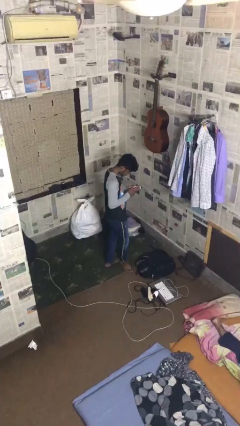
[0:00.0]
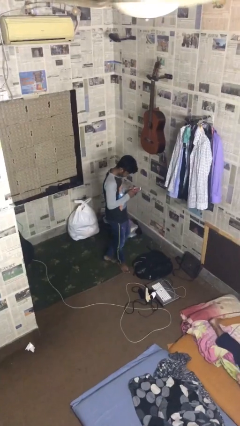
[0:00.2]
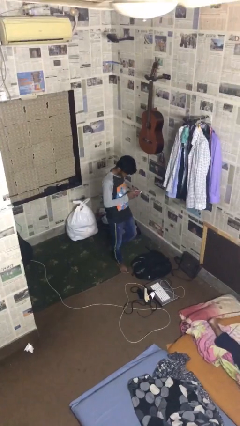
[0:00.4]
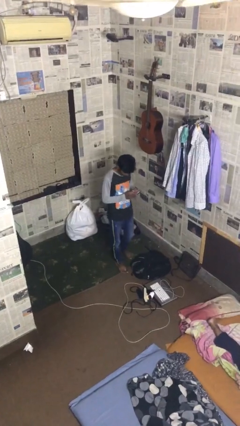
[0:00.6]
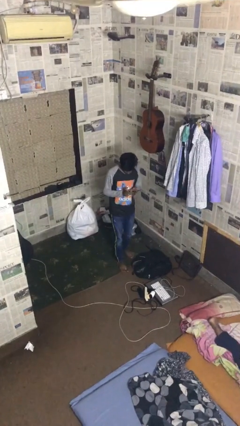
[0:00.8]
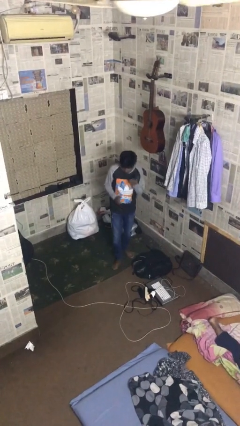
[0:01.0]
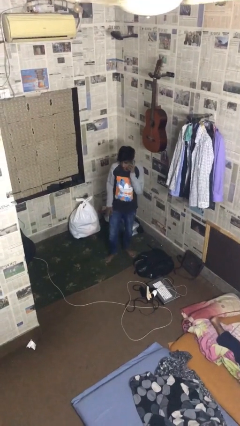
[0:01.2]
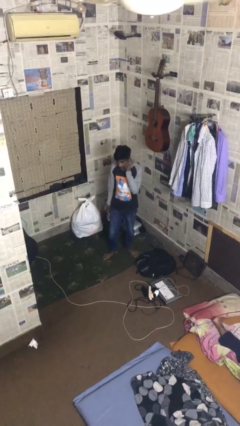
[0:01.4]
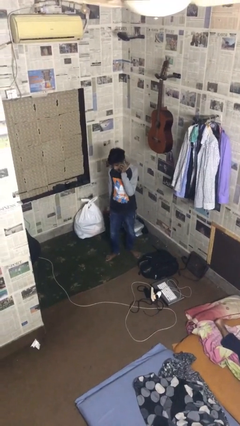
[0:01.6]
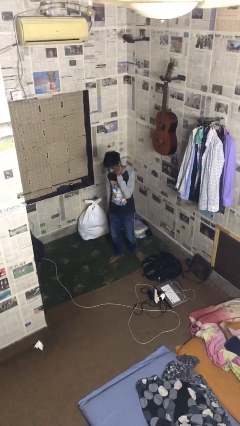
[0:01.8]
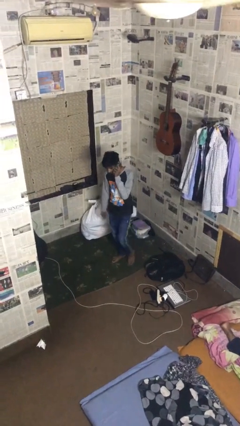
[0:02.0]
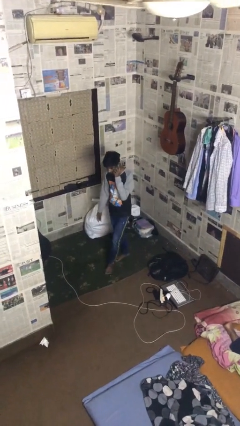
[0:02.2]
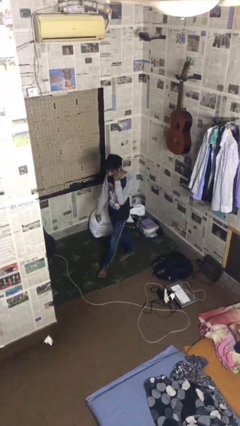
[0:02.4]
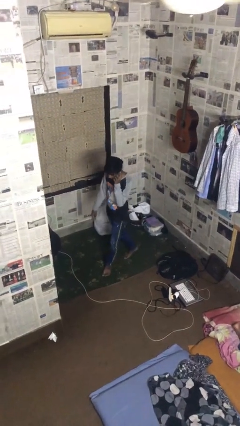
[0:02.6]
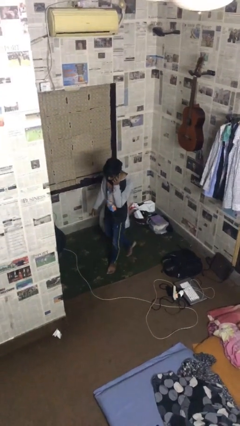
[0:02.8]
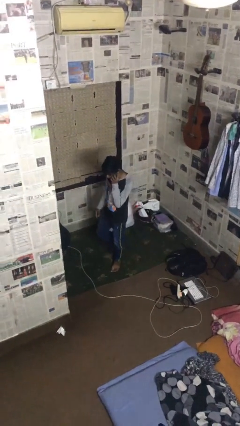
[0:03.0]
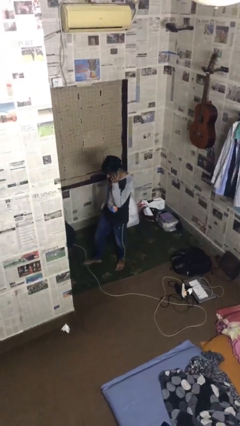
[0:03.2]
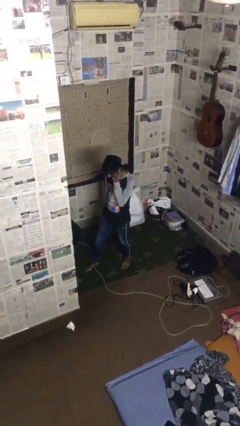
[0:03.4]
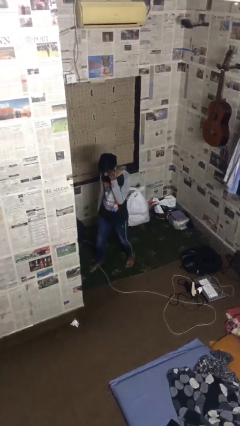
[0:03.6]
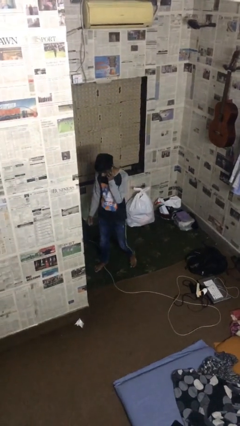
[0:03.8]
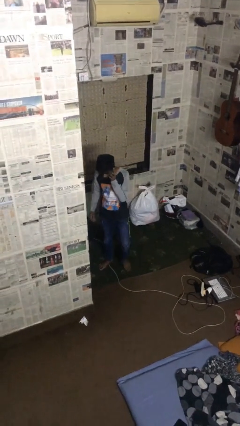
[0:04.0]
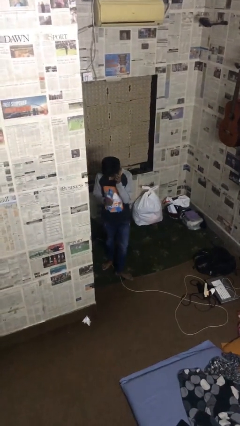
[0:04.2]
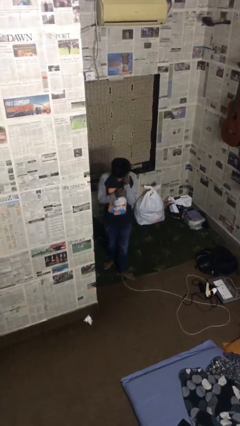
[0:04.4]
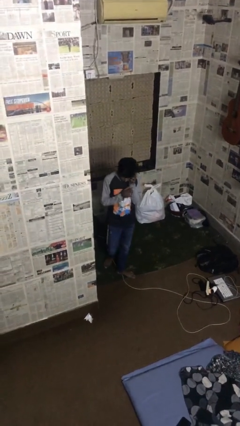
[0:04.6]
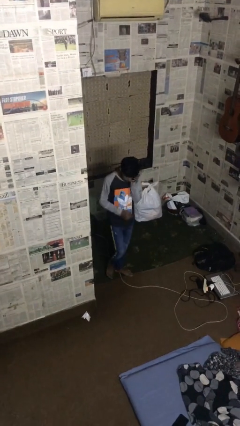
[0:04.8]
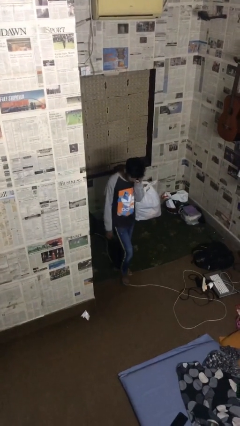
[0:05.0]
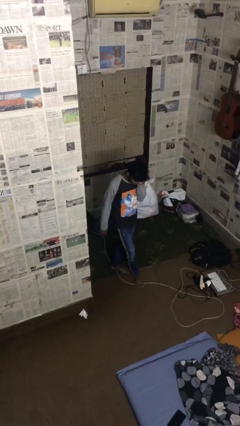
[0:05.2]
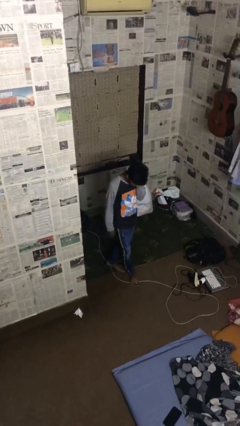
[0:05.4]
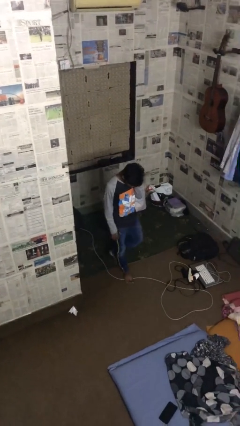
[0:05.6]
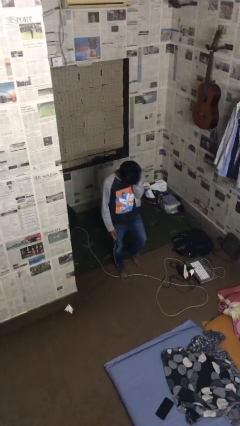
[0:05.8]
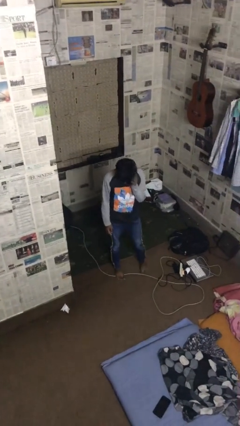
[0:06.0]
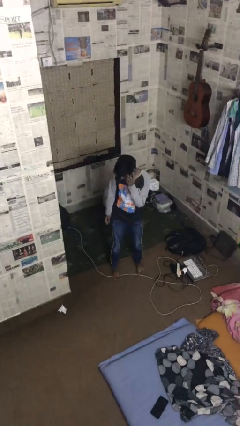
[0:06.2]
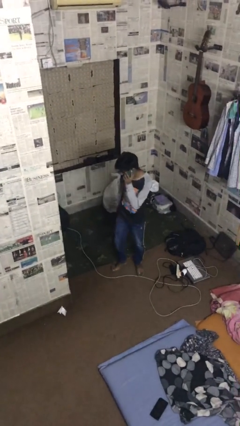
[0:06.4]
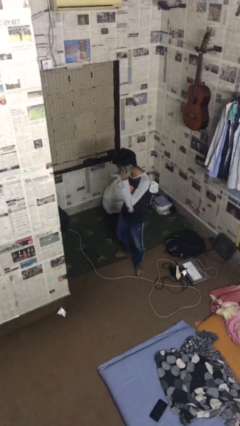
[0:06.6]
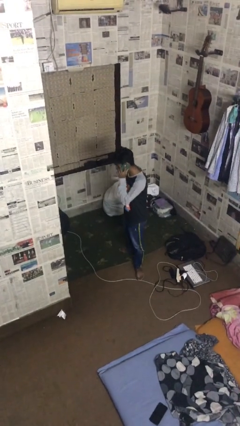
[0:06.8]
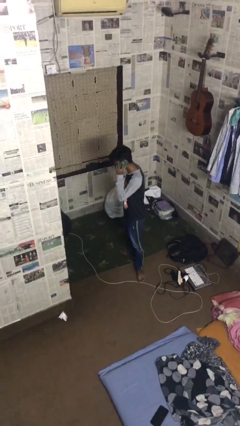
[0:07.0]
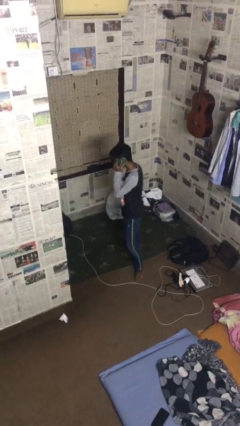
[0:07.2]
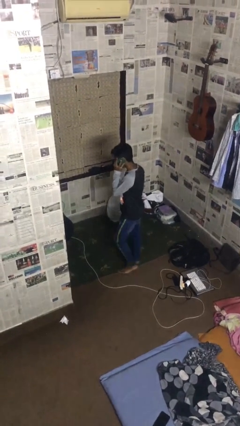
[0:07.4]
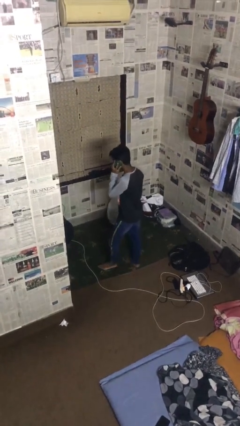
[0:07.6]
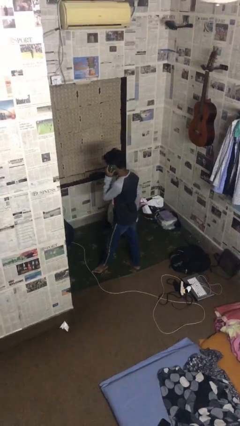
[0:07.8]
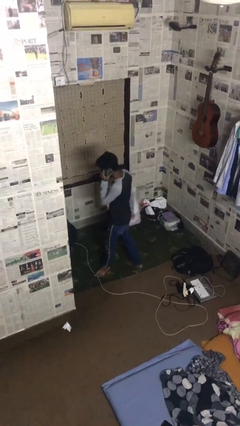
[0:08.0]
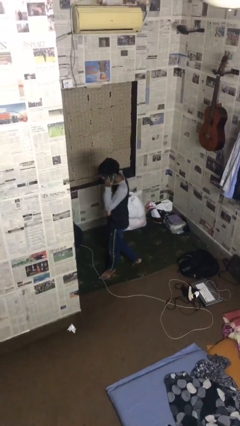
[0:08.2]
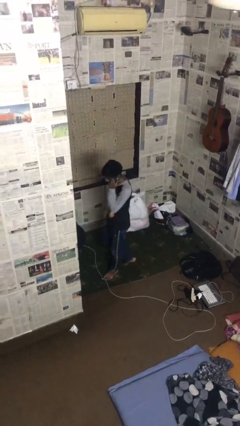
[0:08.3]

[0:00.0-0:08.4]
person talks on phone

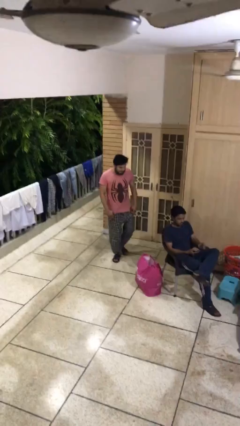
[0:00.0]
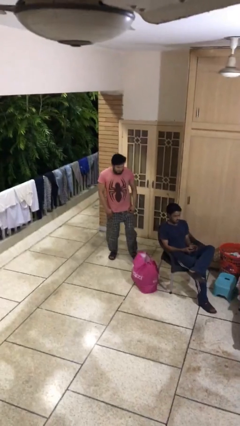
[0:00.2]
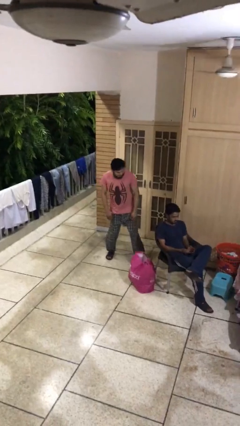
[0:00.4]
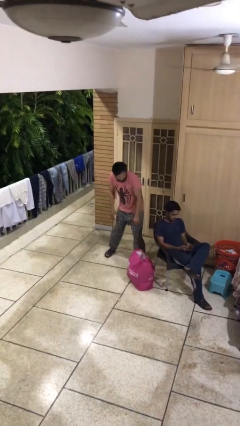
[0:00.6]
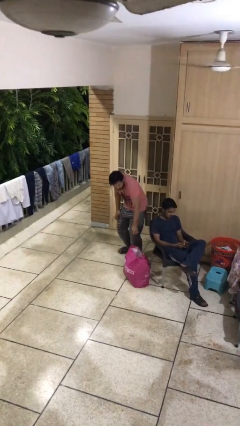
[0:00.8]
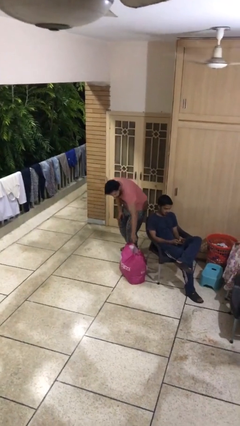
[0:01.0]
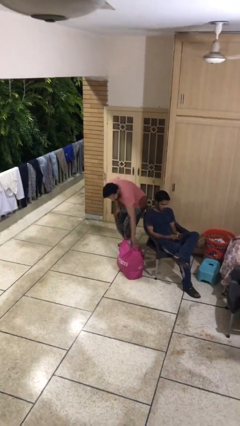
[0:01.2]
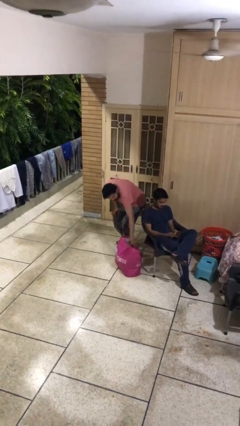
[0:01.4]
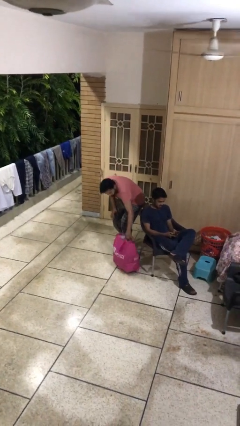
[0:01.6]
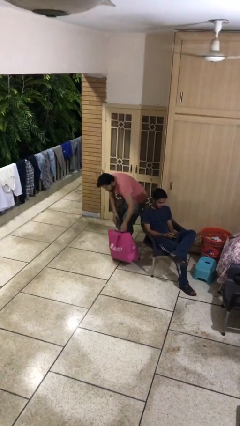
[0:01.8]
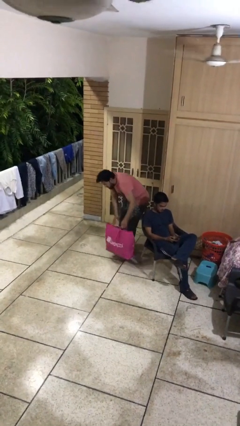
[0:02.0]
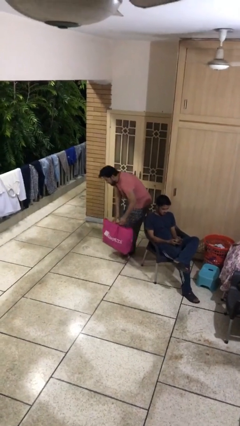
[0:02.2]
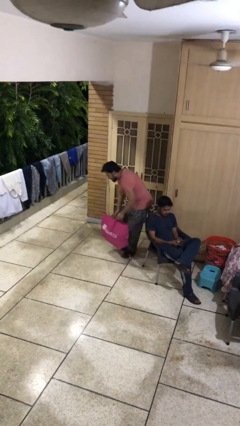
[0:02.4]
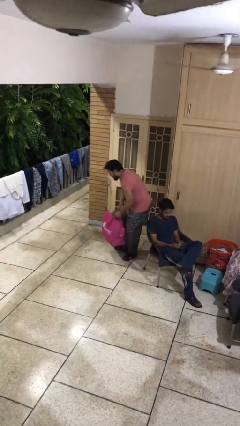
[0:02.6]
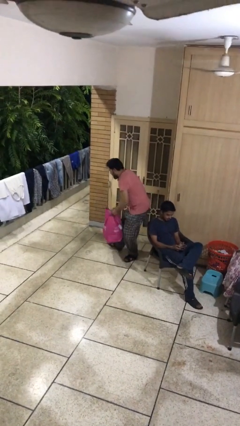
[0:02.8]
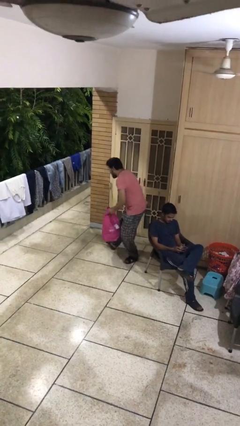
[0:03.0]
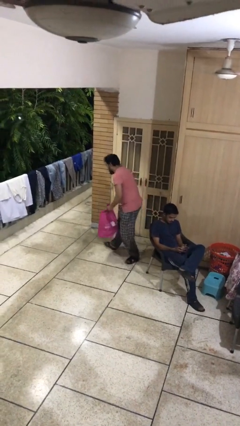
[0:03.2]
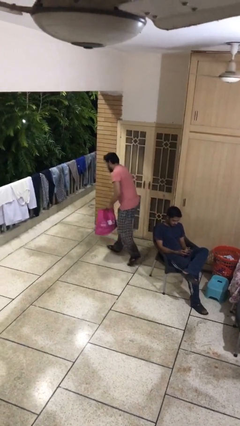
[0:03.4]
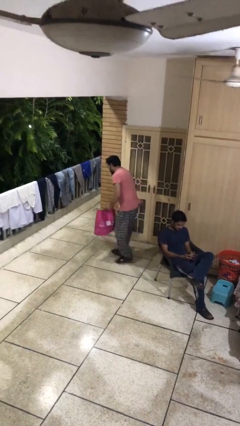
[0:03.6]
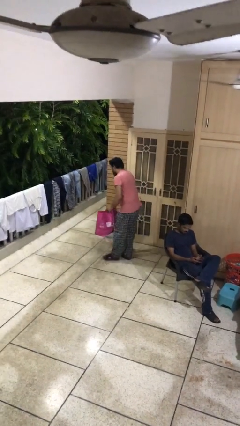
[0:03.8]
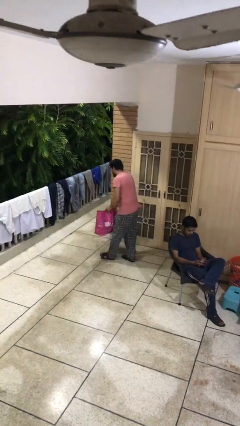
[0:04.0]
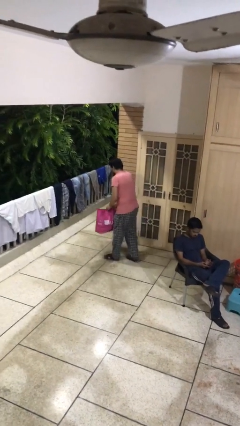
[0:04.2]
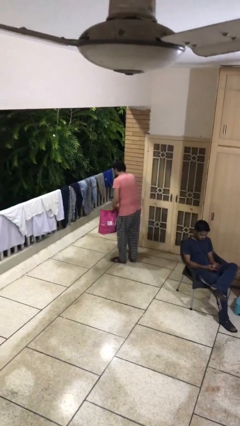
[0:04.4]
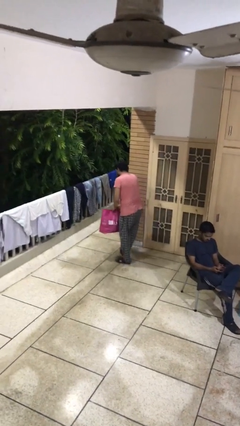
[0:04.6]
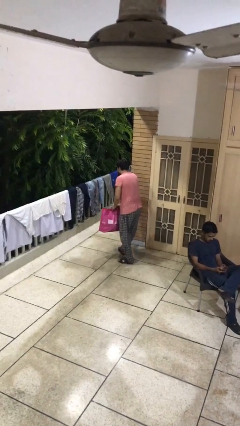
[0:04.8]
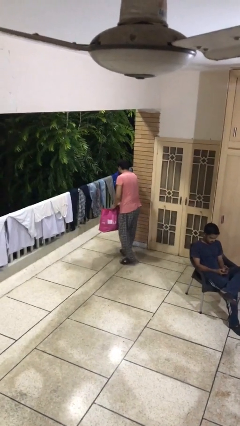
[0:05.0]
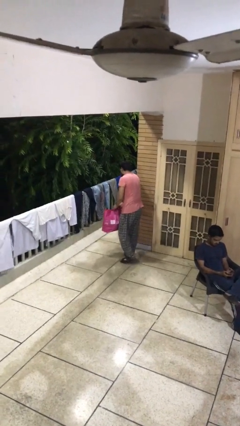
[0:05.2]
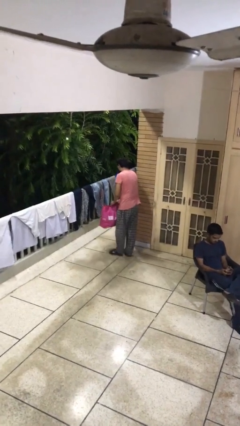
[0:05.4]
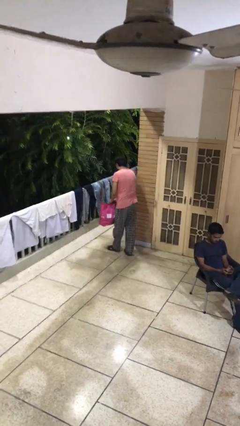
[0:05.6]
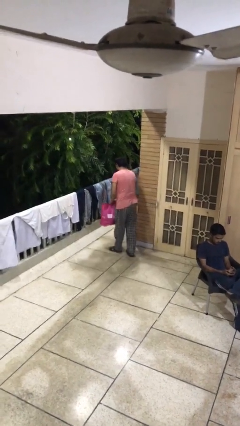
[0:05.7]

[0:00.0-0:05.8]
person steals object from person

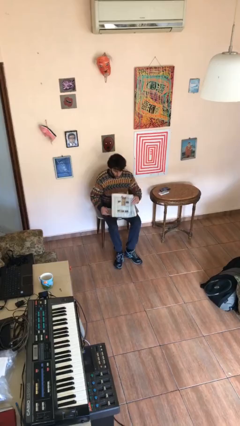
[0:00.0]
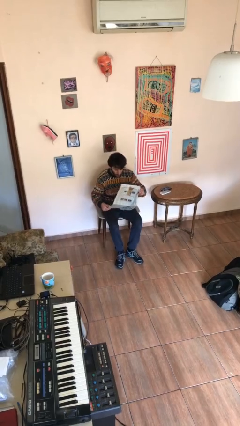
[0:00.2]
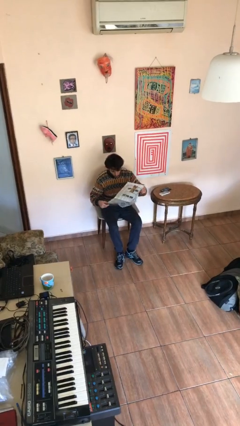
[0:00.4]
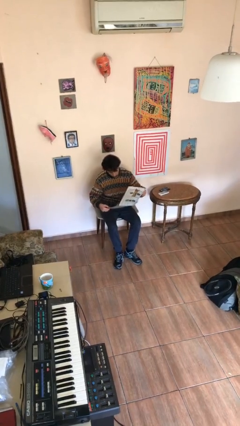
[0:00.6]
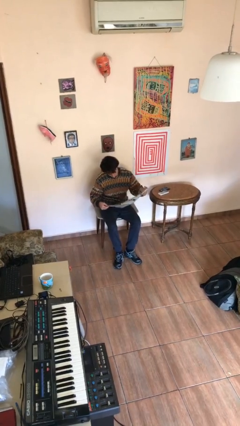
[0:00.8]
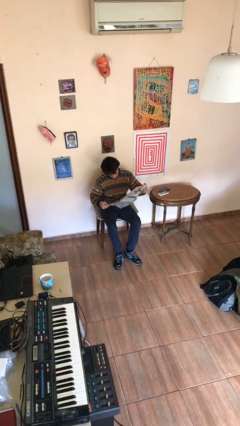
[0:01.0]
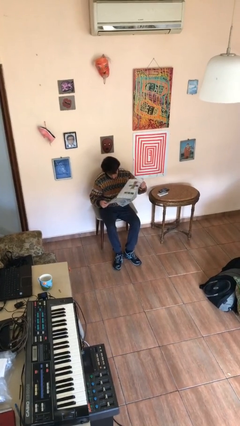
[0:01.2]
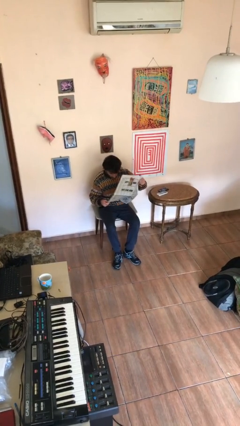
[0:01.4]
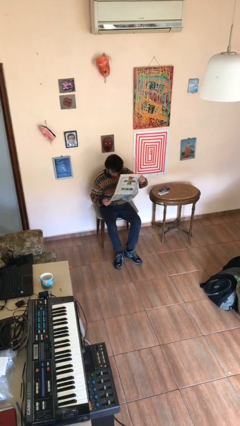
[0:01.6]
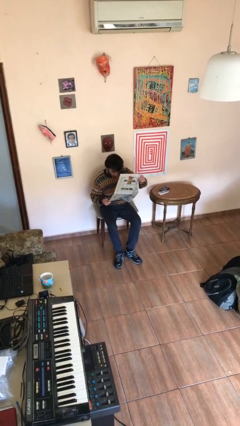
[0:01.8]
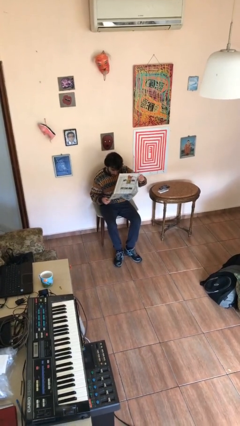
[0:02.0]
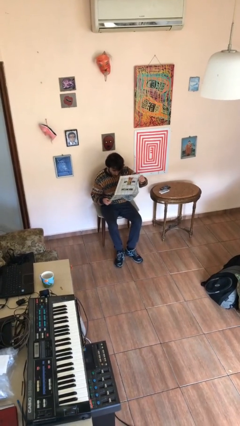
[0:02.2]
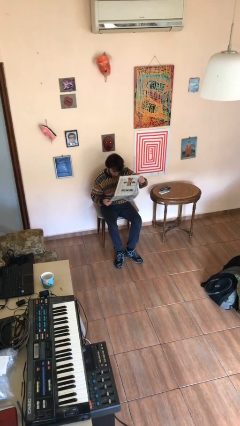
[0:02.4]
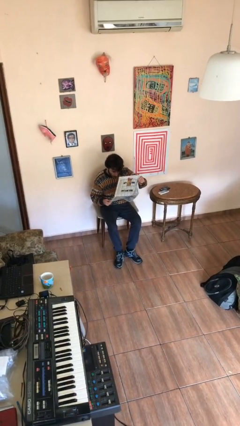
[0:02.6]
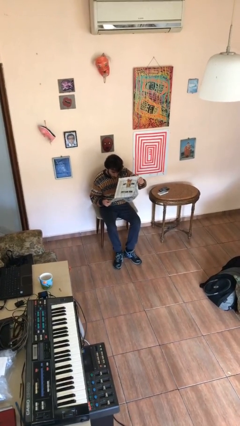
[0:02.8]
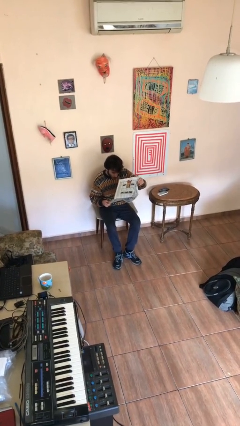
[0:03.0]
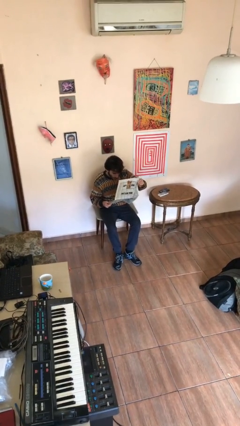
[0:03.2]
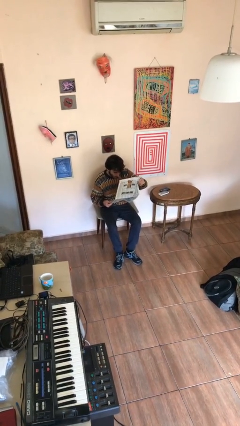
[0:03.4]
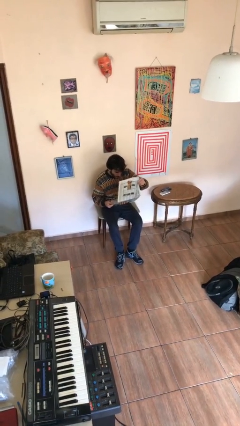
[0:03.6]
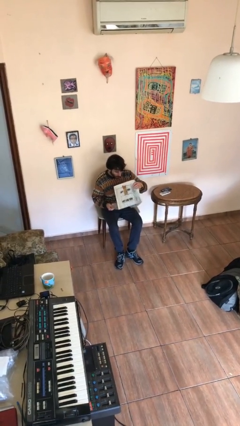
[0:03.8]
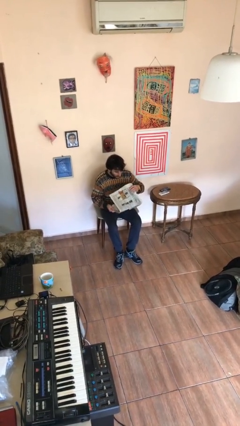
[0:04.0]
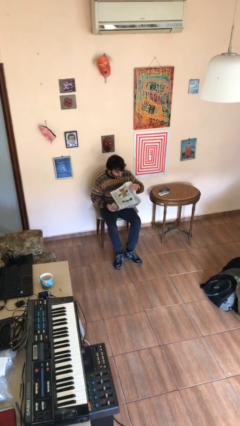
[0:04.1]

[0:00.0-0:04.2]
person reads newspaper
